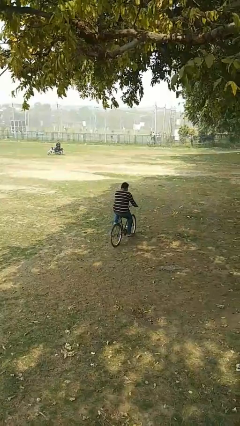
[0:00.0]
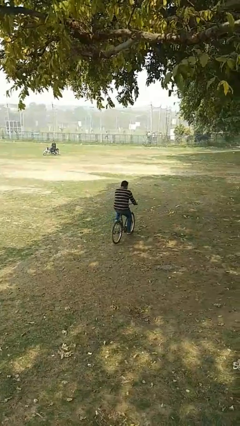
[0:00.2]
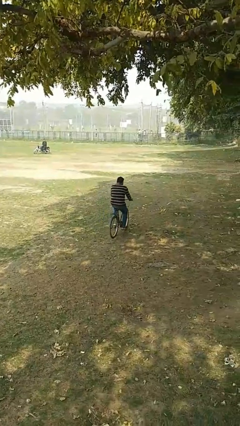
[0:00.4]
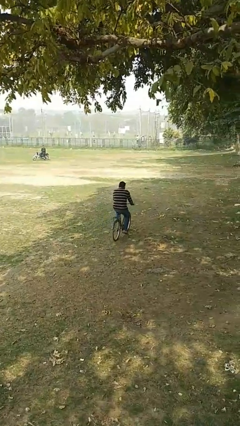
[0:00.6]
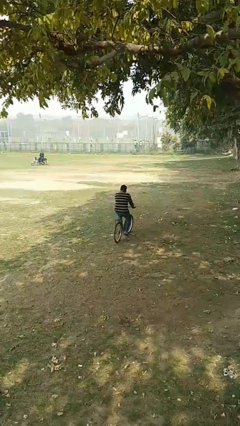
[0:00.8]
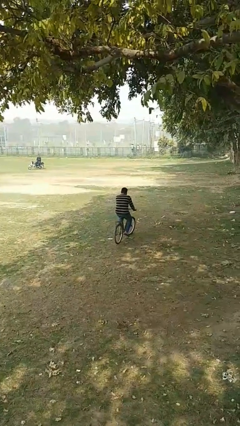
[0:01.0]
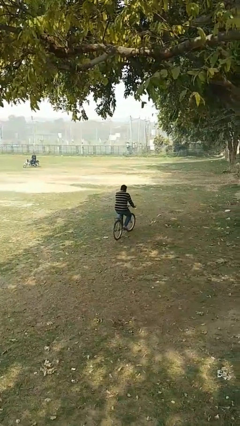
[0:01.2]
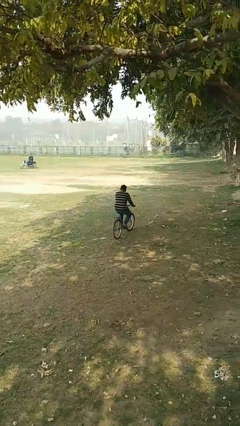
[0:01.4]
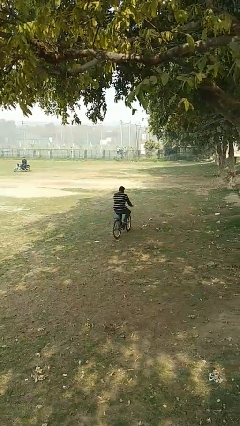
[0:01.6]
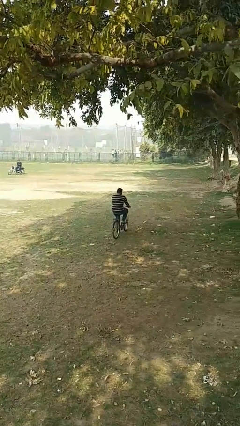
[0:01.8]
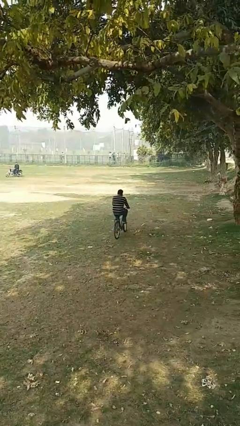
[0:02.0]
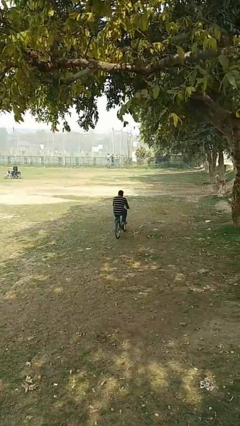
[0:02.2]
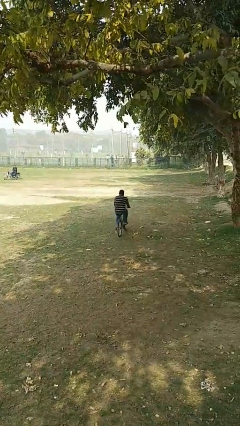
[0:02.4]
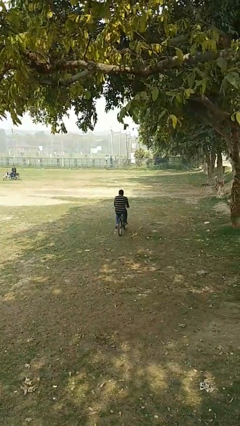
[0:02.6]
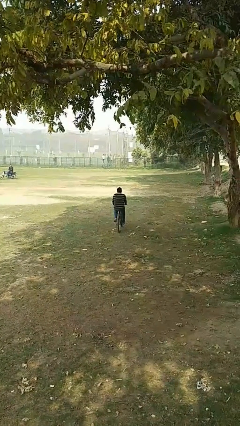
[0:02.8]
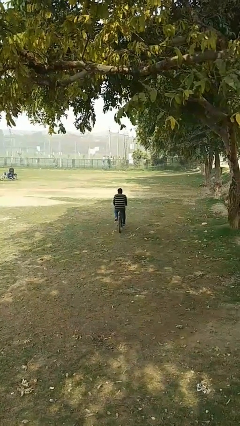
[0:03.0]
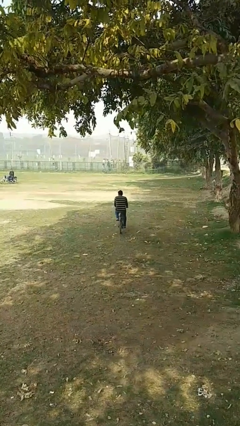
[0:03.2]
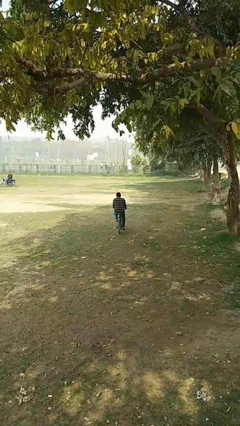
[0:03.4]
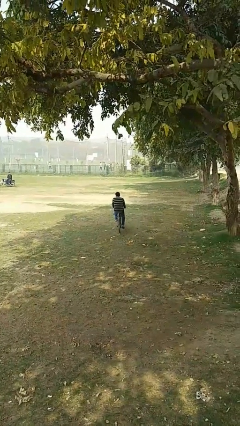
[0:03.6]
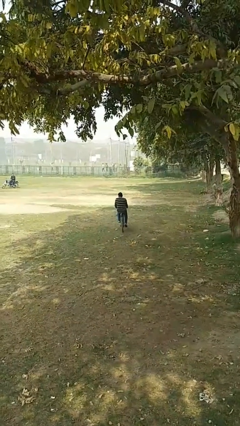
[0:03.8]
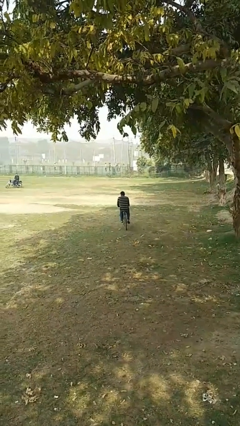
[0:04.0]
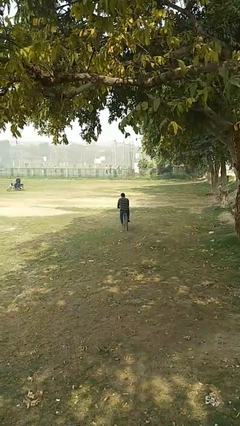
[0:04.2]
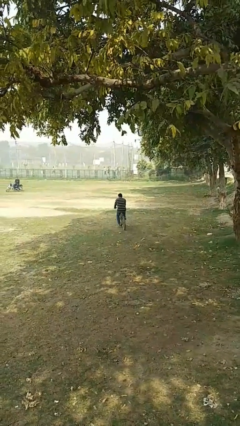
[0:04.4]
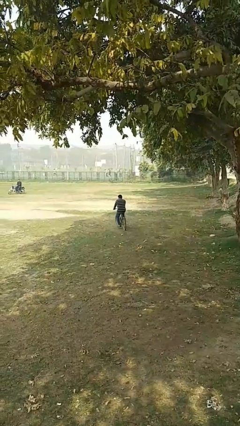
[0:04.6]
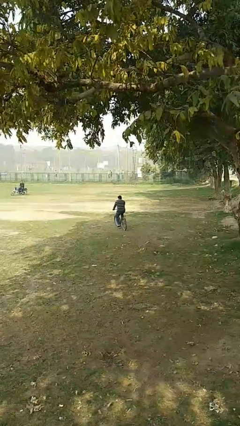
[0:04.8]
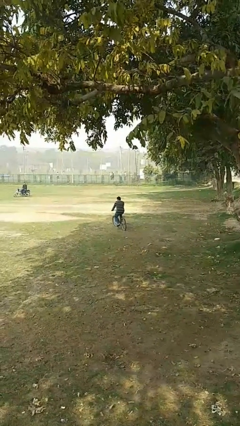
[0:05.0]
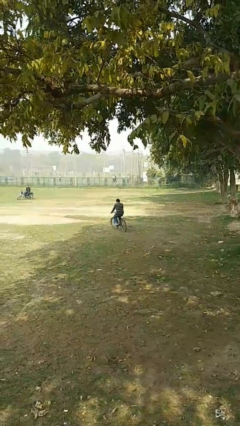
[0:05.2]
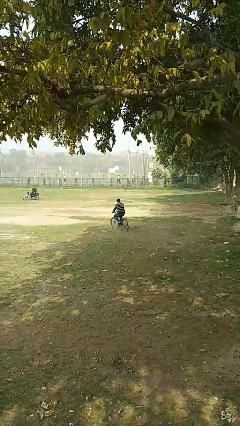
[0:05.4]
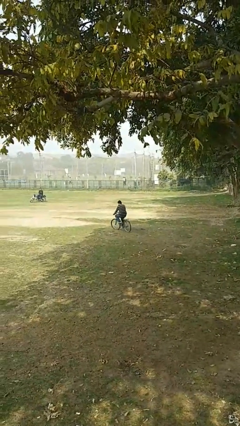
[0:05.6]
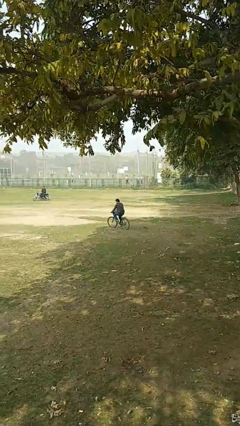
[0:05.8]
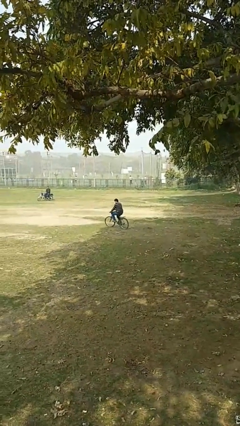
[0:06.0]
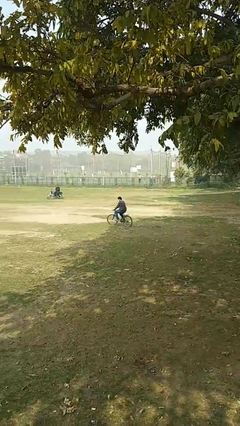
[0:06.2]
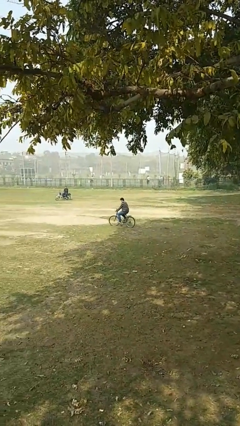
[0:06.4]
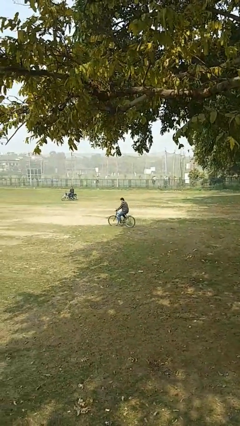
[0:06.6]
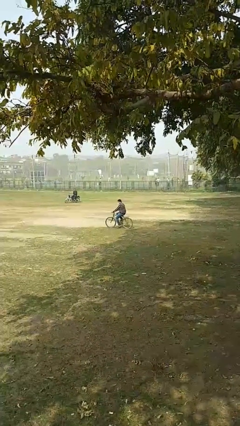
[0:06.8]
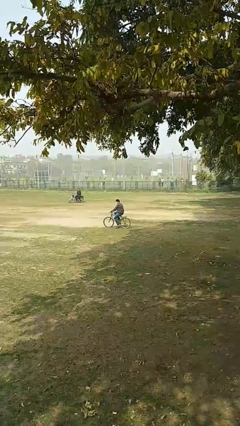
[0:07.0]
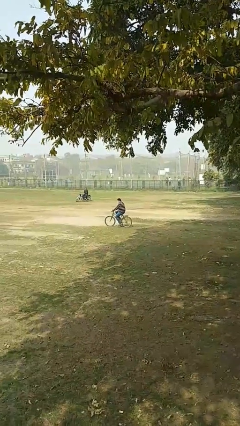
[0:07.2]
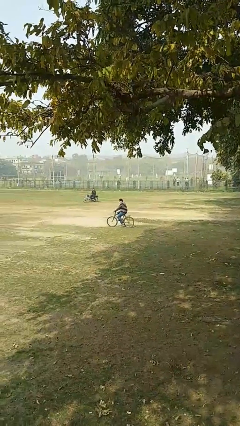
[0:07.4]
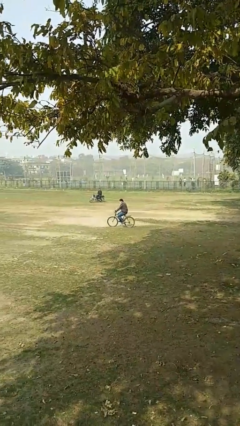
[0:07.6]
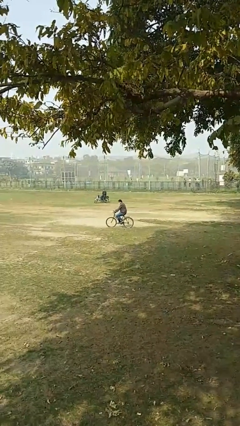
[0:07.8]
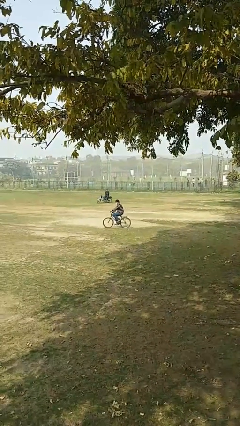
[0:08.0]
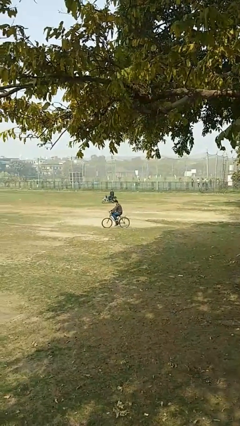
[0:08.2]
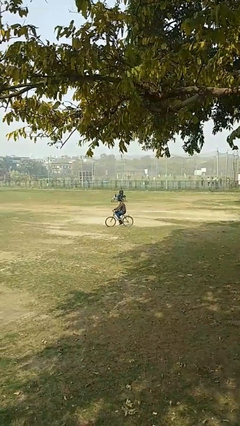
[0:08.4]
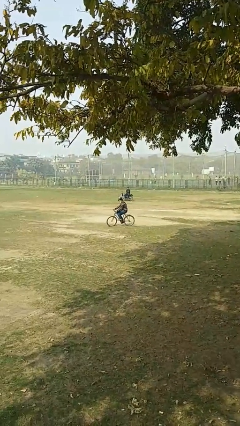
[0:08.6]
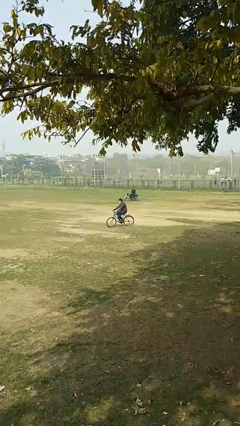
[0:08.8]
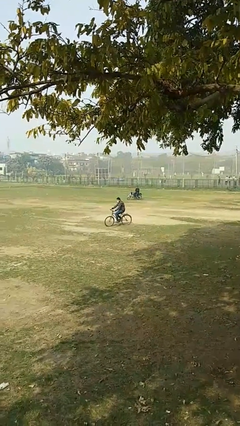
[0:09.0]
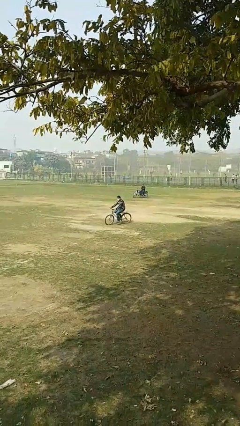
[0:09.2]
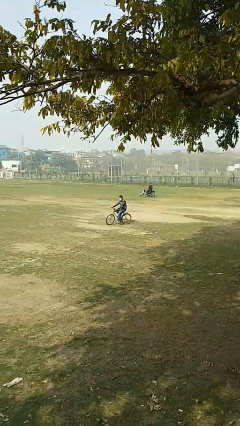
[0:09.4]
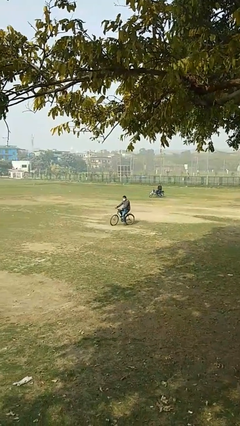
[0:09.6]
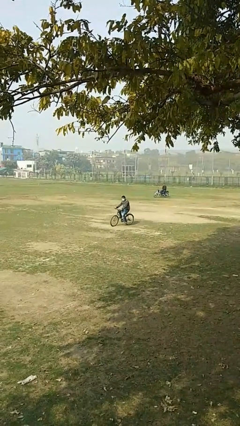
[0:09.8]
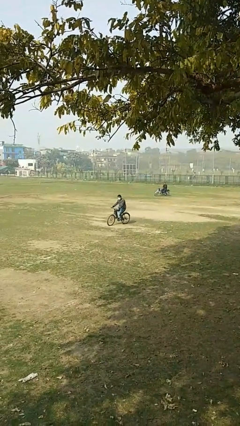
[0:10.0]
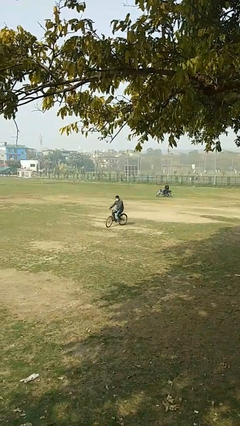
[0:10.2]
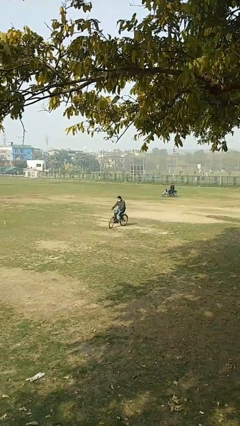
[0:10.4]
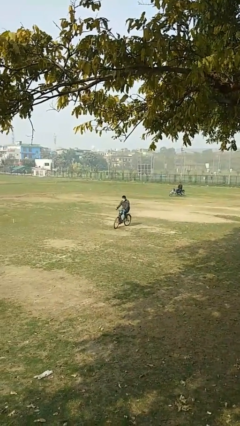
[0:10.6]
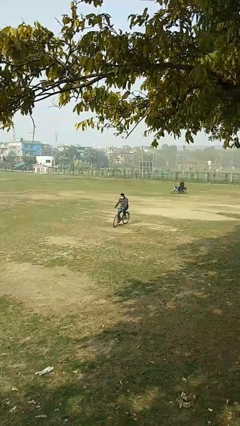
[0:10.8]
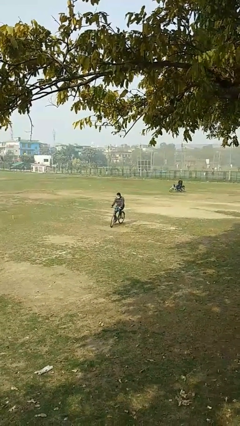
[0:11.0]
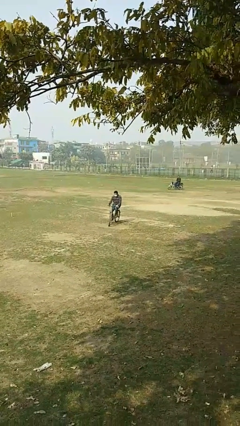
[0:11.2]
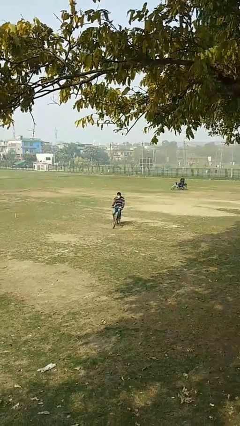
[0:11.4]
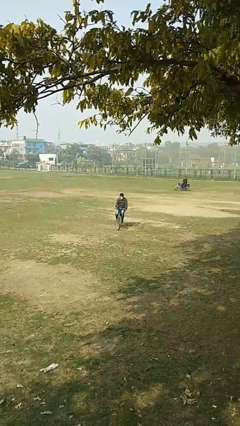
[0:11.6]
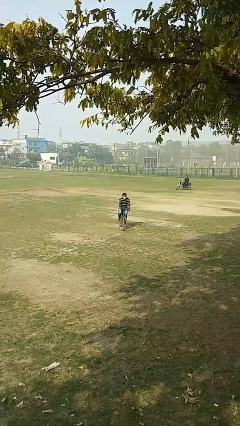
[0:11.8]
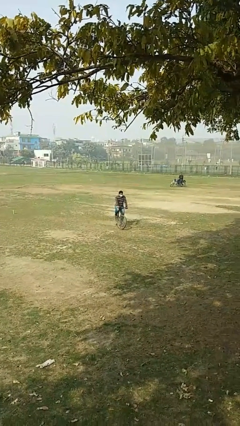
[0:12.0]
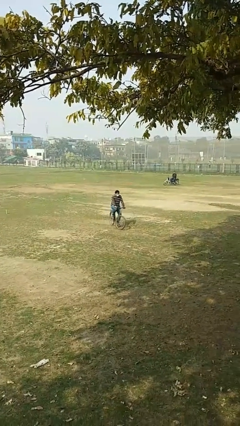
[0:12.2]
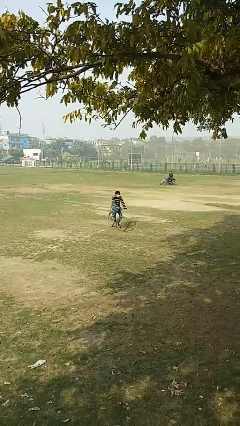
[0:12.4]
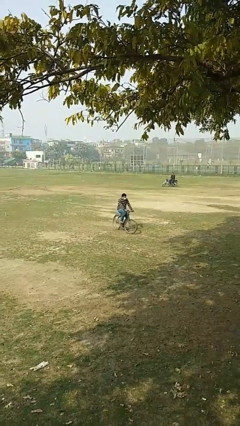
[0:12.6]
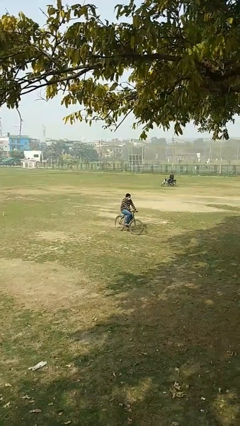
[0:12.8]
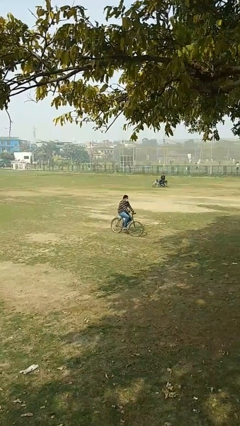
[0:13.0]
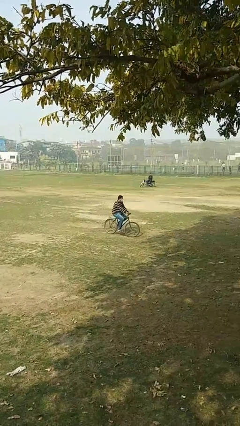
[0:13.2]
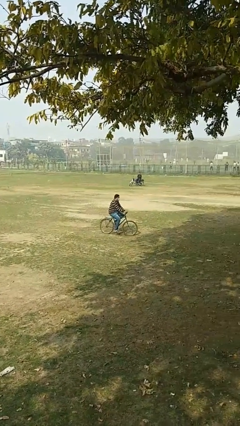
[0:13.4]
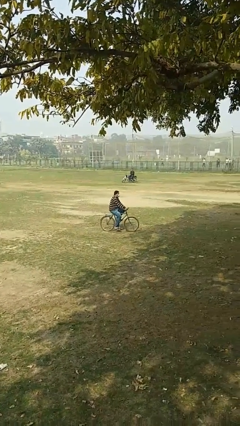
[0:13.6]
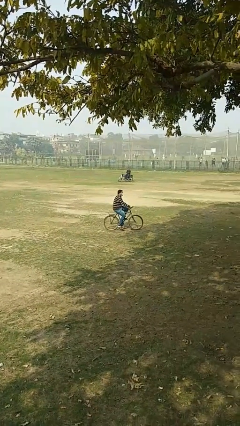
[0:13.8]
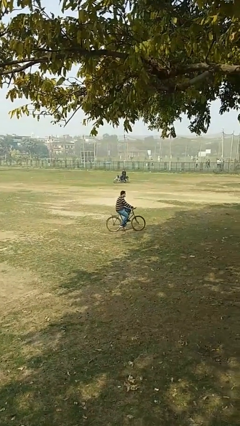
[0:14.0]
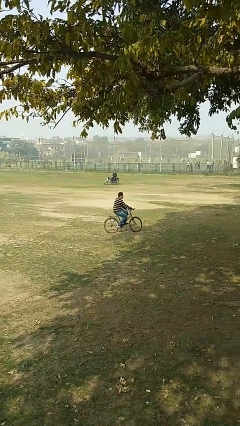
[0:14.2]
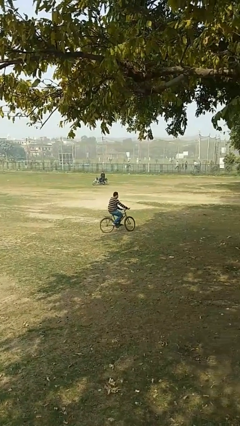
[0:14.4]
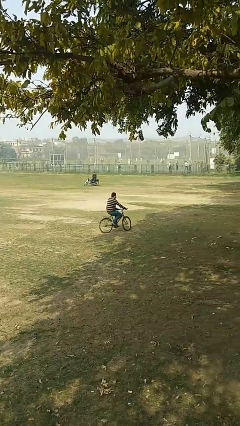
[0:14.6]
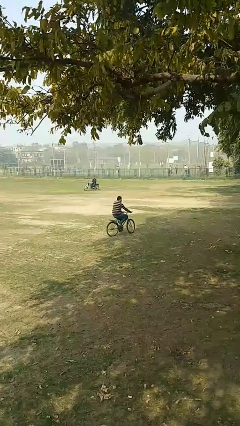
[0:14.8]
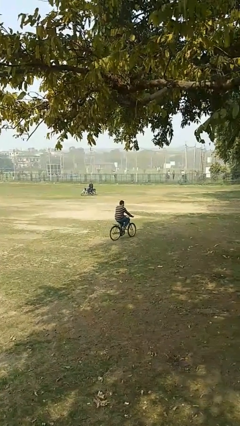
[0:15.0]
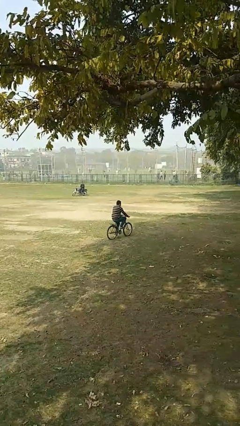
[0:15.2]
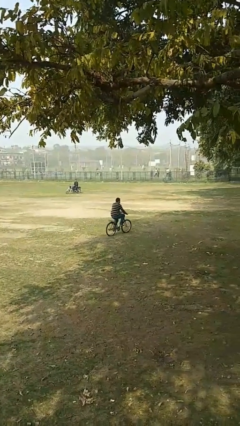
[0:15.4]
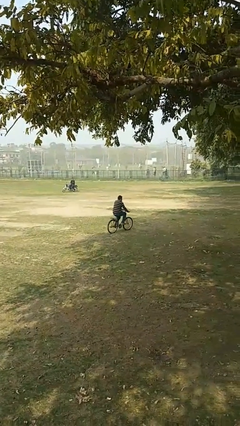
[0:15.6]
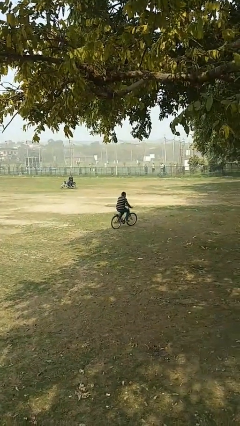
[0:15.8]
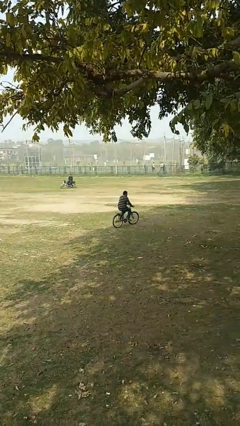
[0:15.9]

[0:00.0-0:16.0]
person rides bicycle

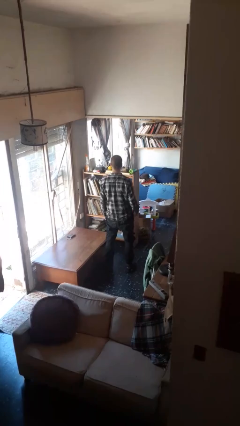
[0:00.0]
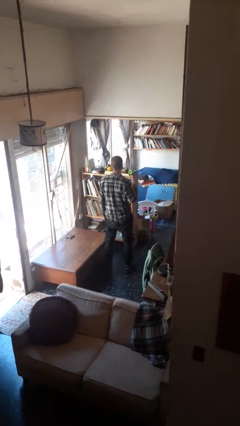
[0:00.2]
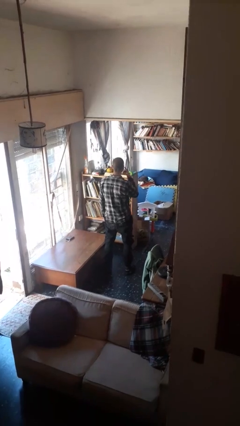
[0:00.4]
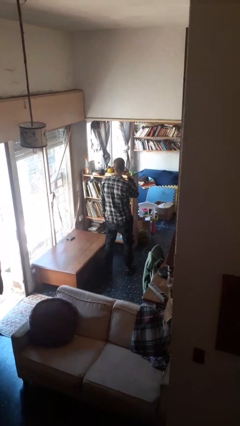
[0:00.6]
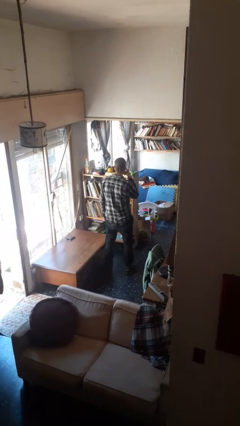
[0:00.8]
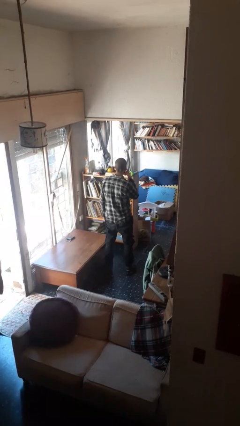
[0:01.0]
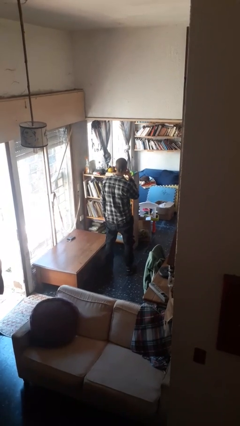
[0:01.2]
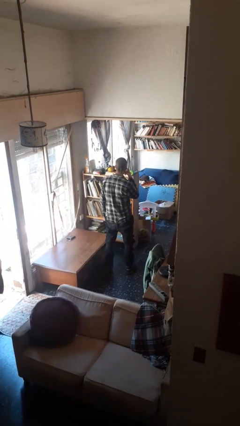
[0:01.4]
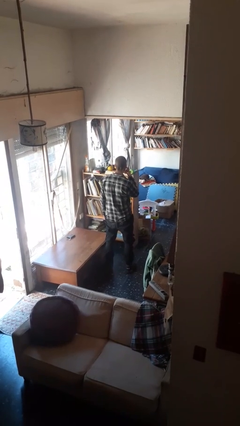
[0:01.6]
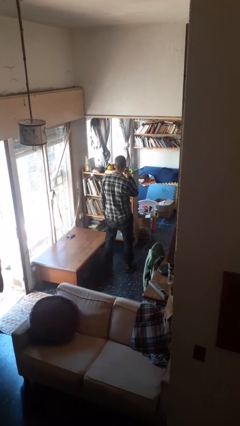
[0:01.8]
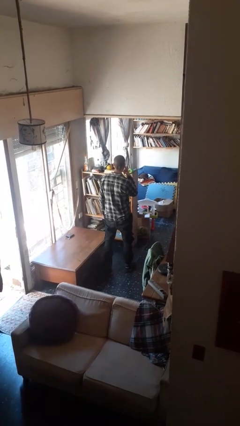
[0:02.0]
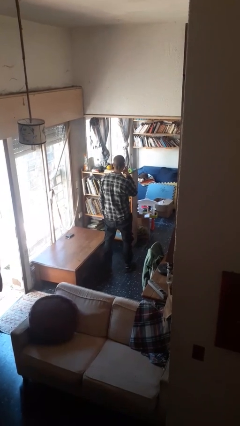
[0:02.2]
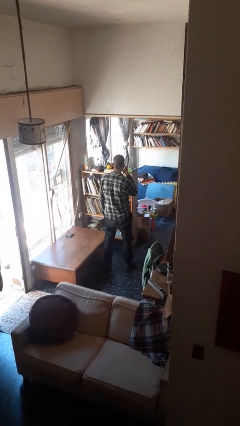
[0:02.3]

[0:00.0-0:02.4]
person gestures listen closely
